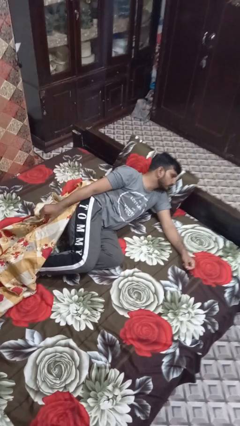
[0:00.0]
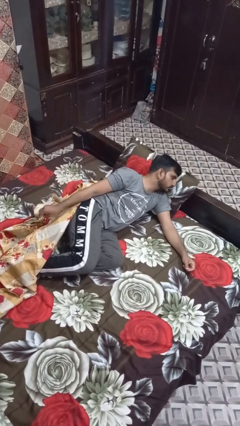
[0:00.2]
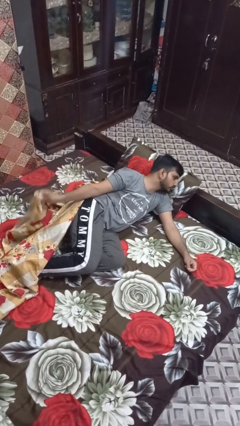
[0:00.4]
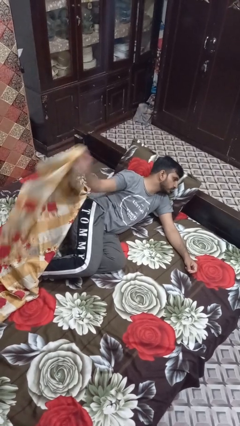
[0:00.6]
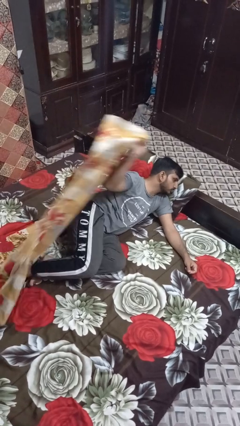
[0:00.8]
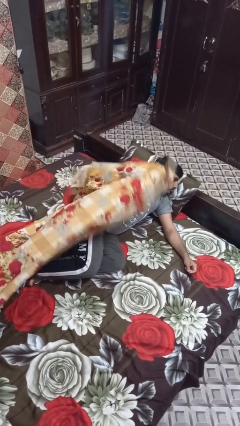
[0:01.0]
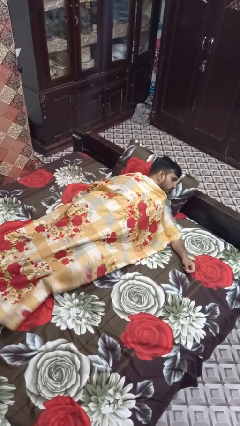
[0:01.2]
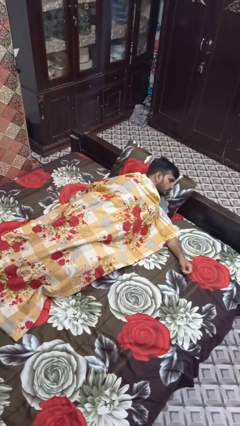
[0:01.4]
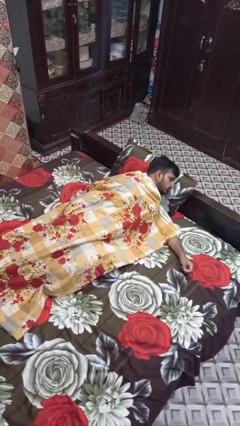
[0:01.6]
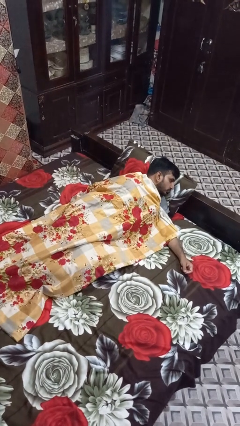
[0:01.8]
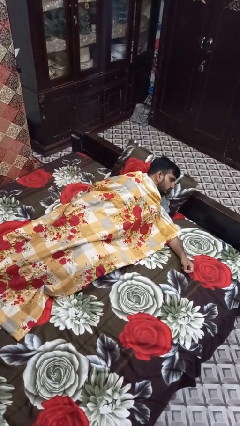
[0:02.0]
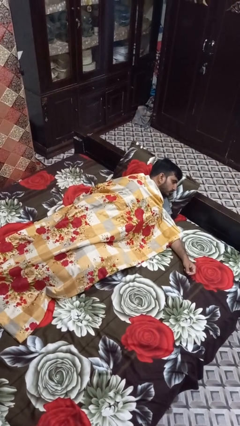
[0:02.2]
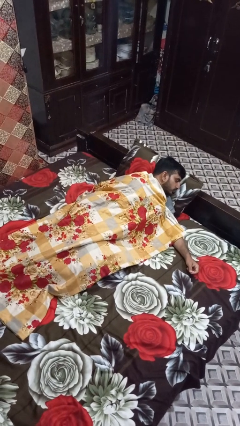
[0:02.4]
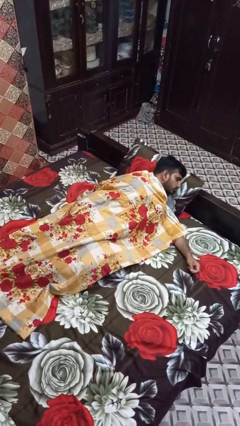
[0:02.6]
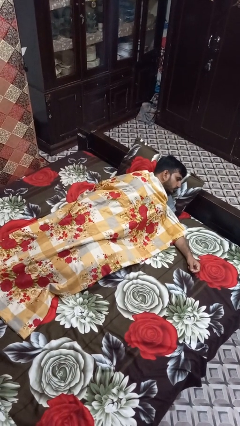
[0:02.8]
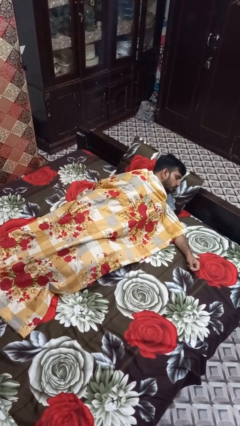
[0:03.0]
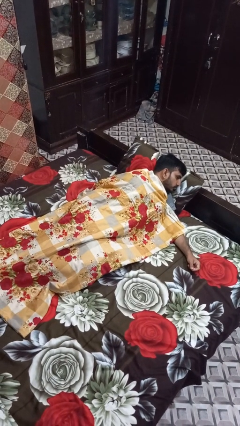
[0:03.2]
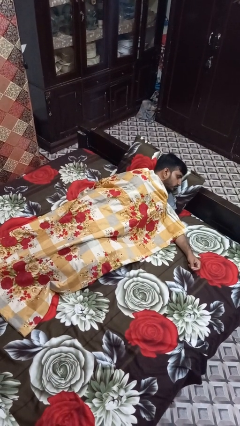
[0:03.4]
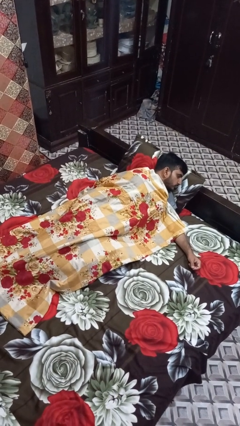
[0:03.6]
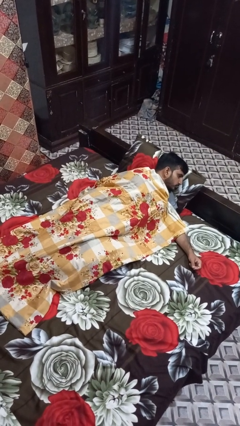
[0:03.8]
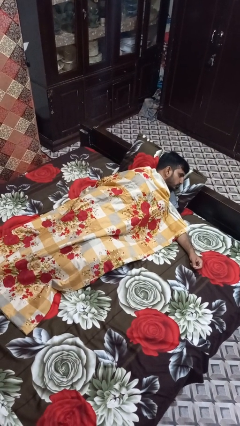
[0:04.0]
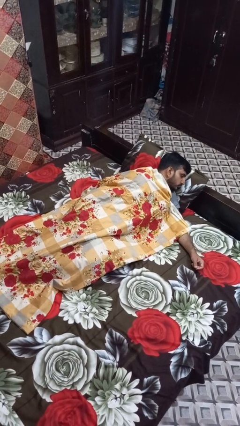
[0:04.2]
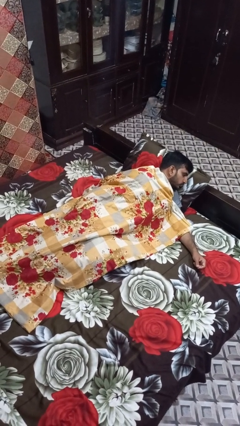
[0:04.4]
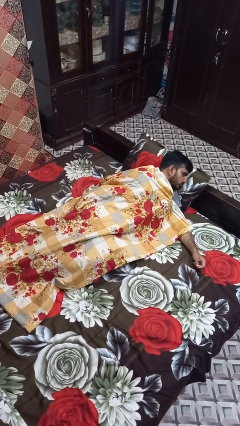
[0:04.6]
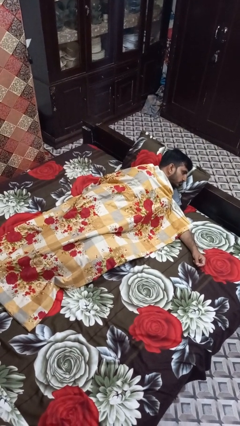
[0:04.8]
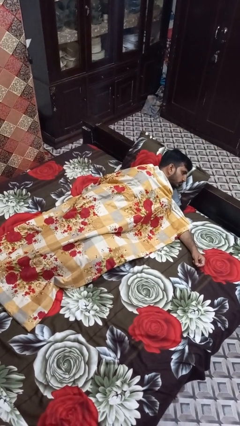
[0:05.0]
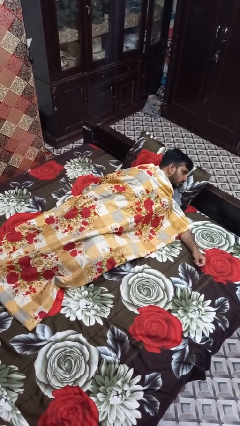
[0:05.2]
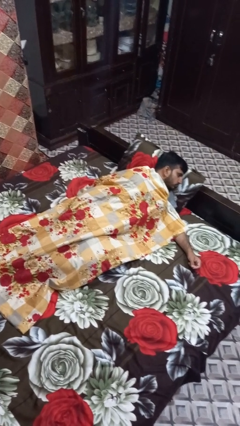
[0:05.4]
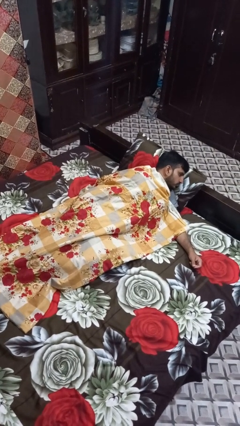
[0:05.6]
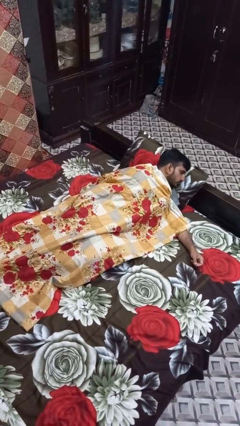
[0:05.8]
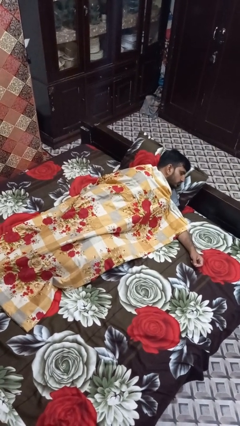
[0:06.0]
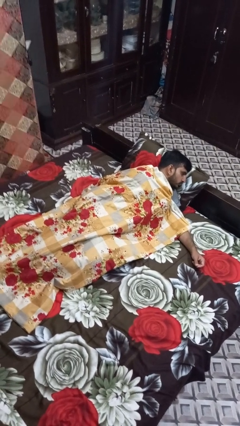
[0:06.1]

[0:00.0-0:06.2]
person covers with bedsheets

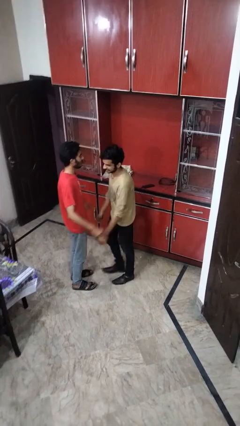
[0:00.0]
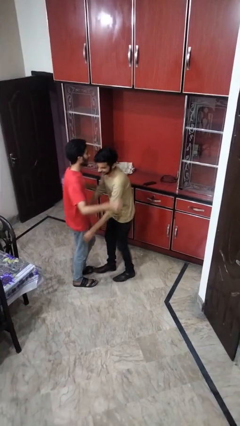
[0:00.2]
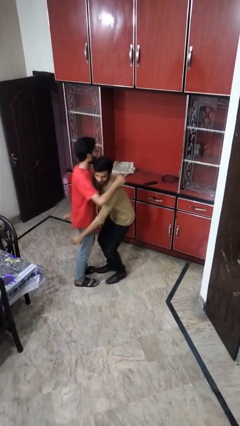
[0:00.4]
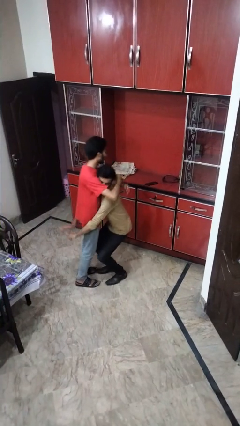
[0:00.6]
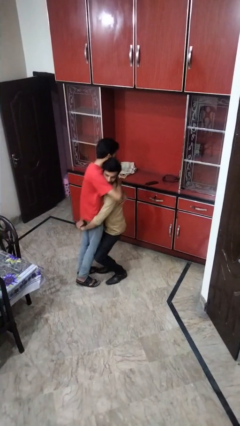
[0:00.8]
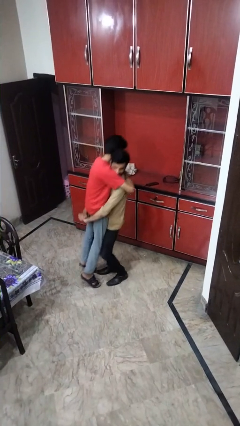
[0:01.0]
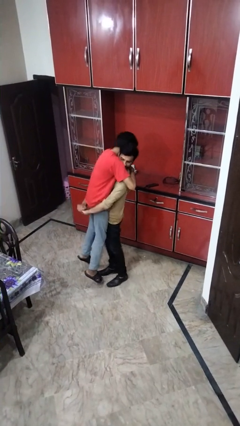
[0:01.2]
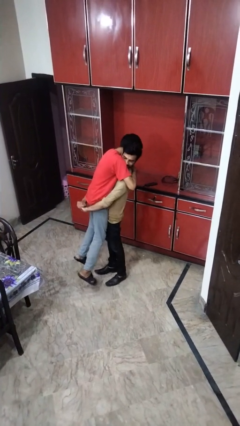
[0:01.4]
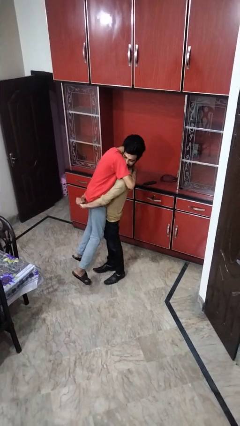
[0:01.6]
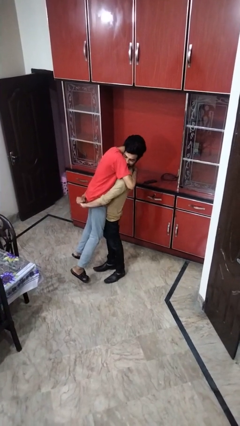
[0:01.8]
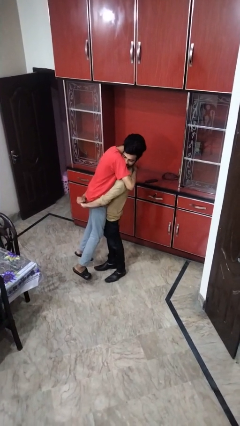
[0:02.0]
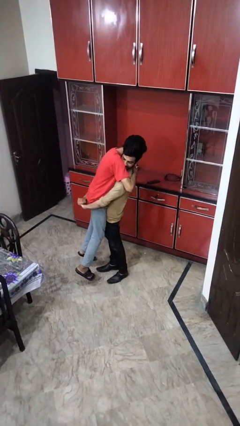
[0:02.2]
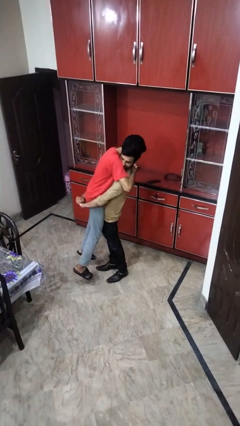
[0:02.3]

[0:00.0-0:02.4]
person picks up person

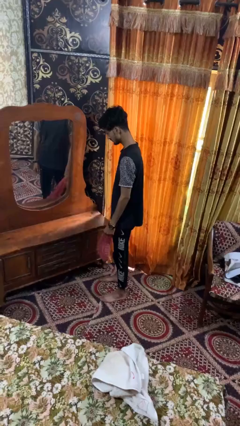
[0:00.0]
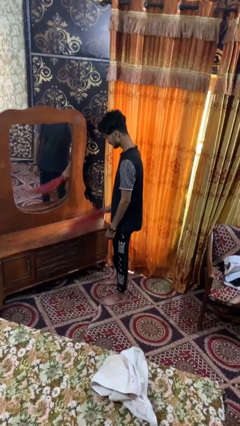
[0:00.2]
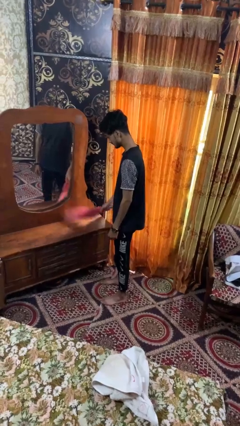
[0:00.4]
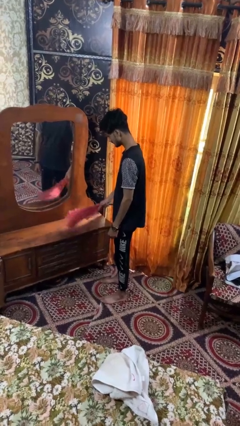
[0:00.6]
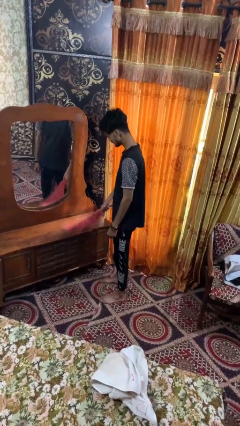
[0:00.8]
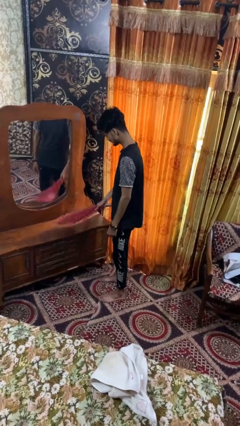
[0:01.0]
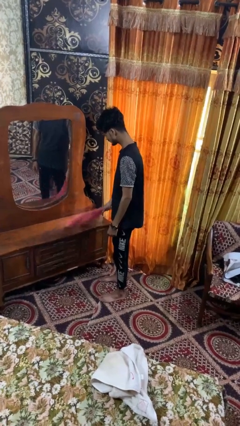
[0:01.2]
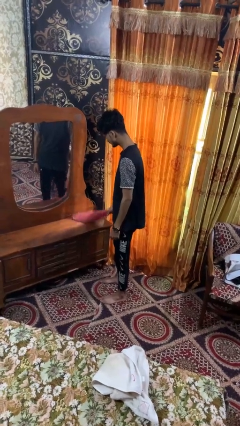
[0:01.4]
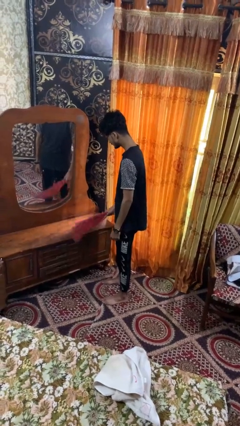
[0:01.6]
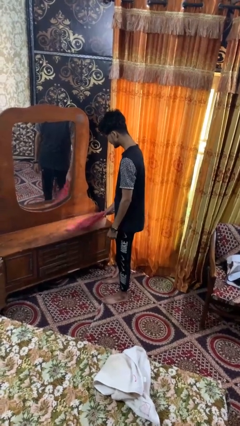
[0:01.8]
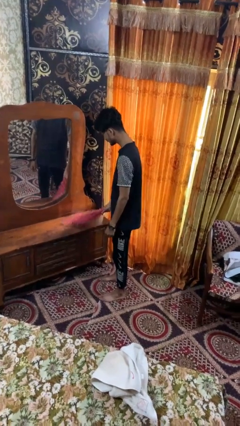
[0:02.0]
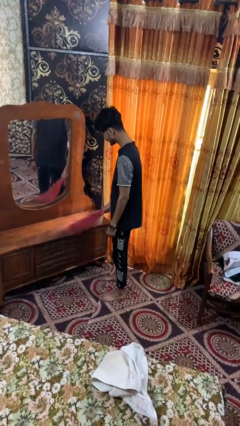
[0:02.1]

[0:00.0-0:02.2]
person dusts furniture

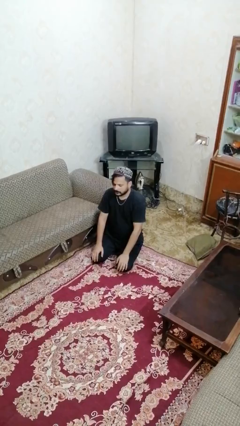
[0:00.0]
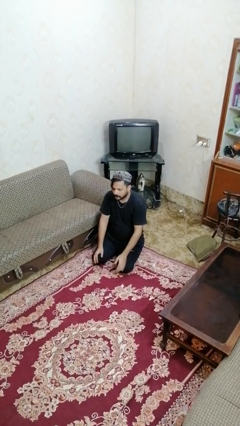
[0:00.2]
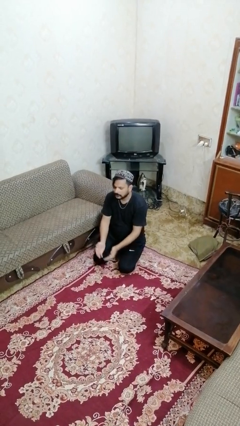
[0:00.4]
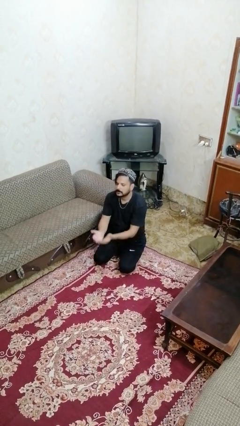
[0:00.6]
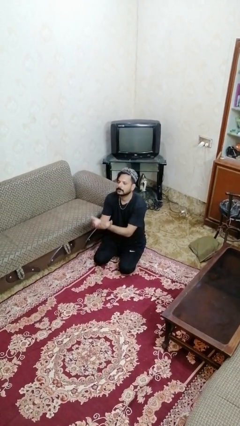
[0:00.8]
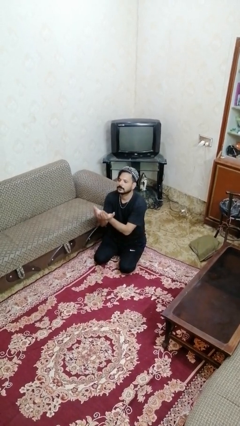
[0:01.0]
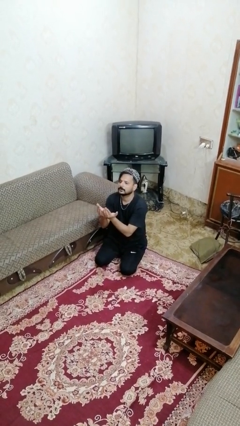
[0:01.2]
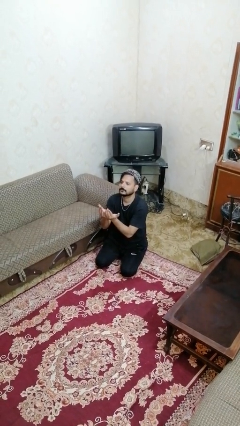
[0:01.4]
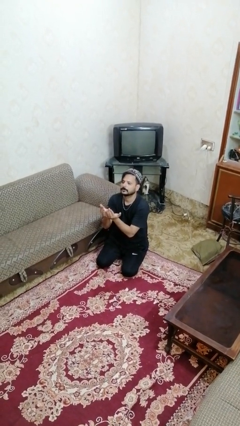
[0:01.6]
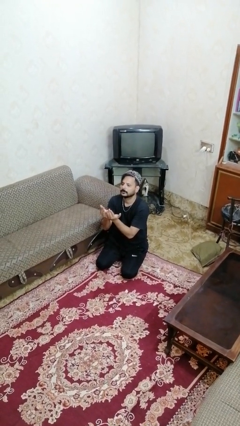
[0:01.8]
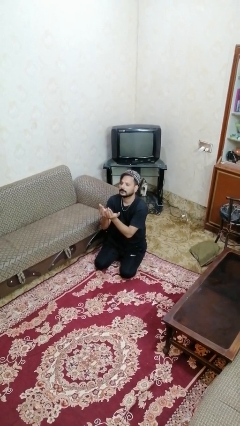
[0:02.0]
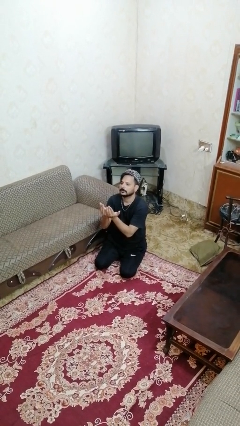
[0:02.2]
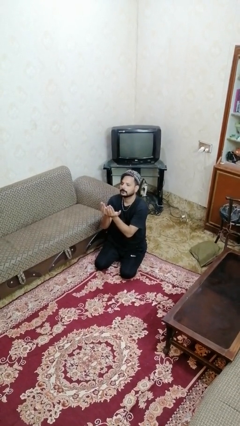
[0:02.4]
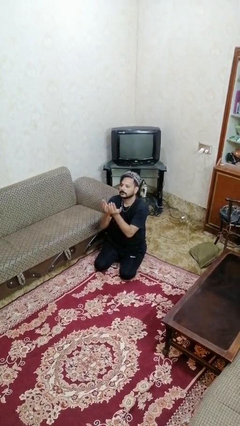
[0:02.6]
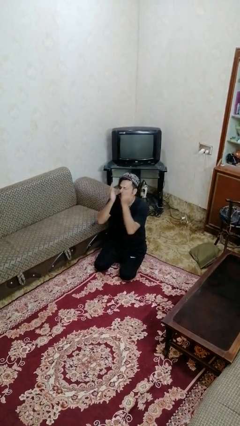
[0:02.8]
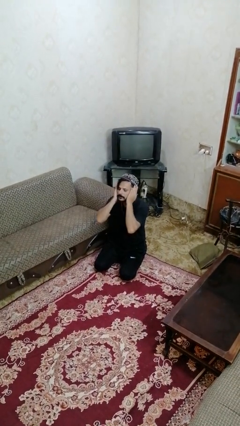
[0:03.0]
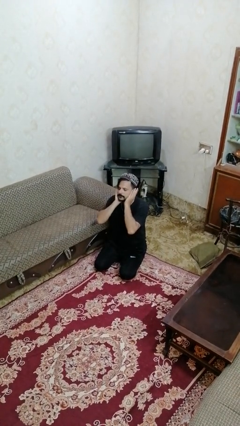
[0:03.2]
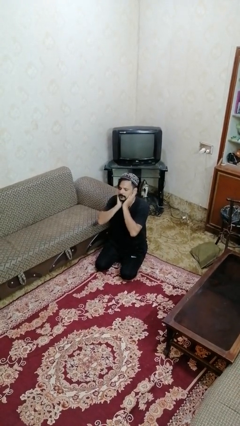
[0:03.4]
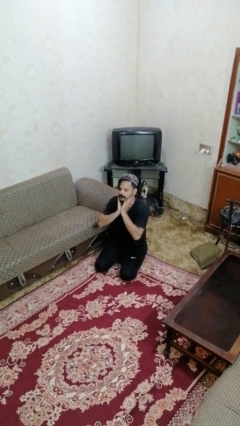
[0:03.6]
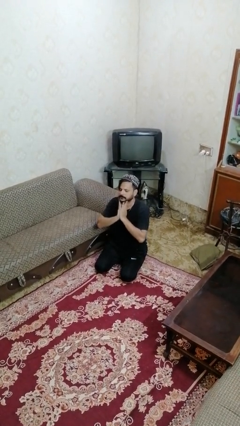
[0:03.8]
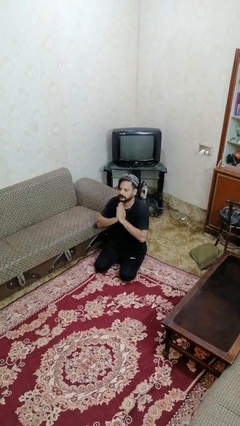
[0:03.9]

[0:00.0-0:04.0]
person prays

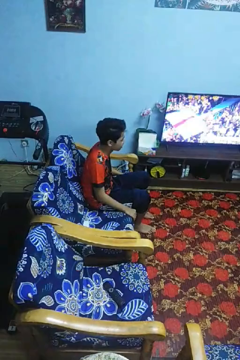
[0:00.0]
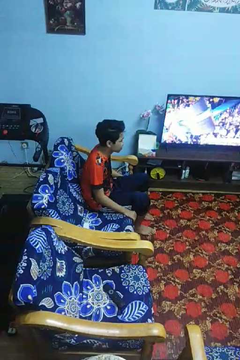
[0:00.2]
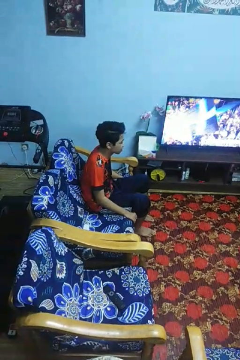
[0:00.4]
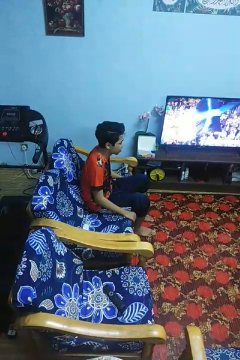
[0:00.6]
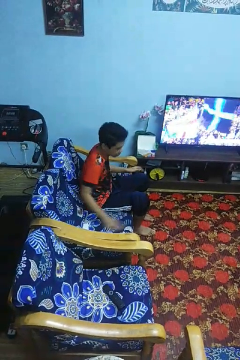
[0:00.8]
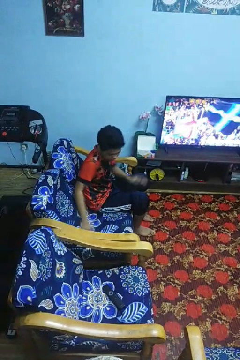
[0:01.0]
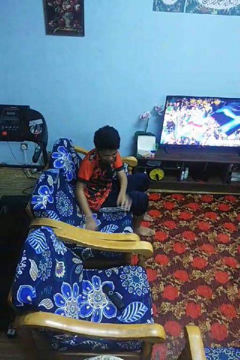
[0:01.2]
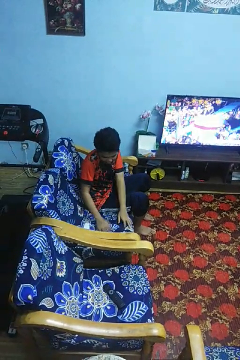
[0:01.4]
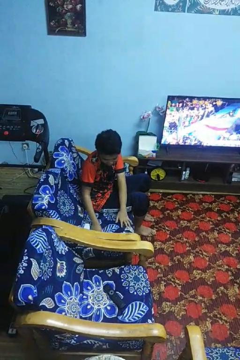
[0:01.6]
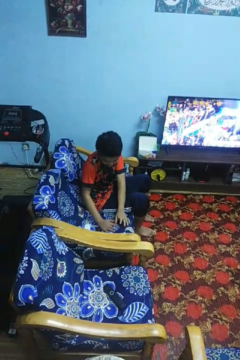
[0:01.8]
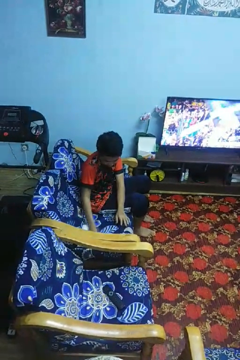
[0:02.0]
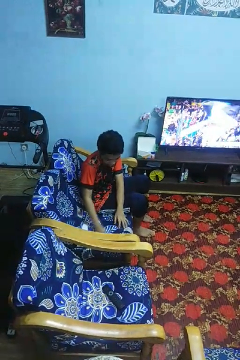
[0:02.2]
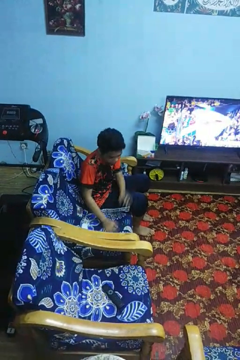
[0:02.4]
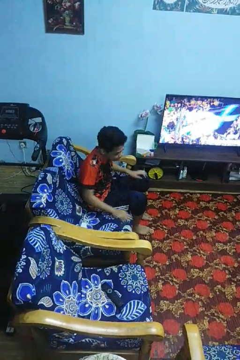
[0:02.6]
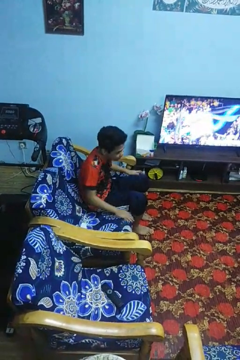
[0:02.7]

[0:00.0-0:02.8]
person searches in couch

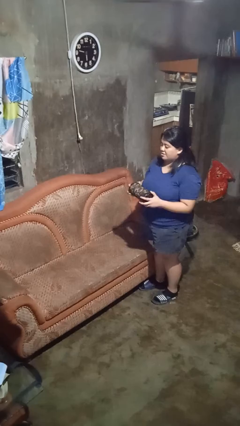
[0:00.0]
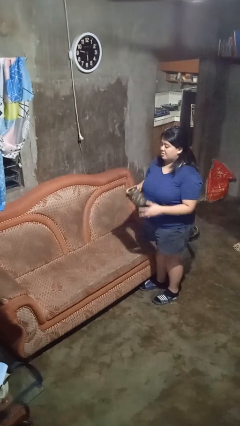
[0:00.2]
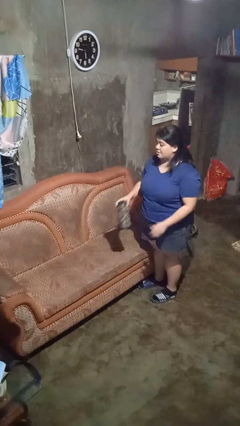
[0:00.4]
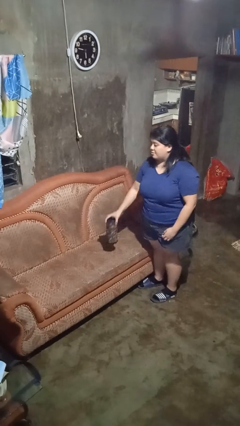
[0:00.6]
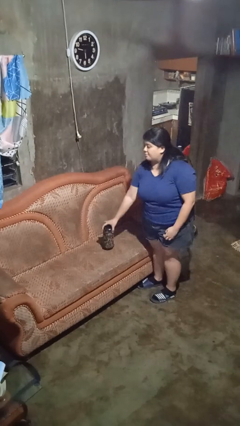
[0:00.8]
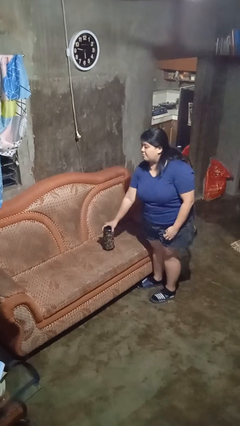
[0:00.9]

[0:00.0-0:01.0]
person puts down object on couch
